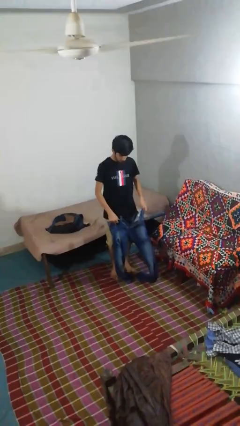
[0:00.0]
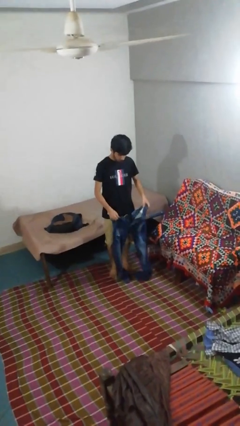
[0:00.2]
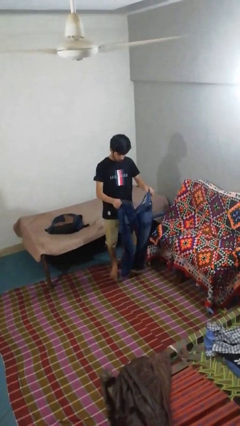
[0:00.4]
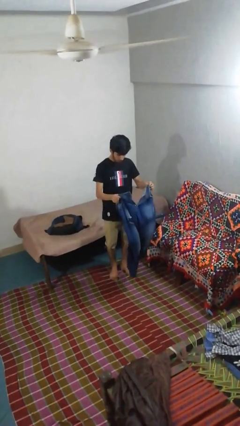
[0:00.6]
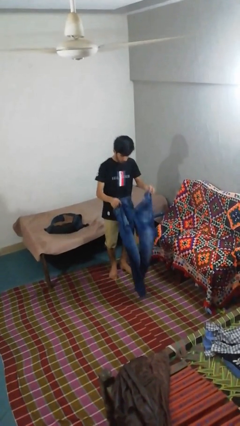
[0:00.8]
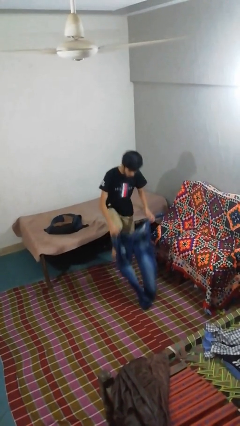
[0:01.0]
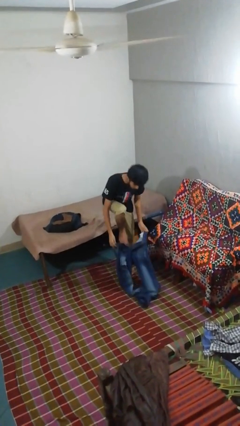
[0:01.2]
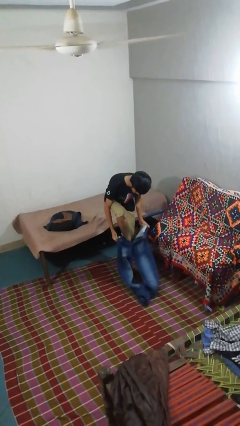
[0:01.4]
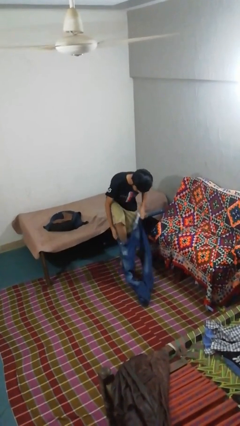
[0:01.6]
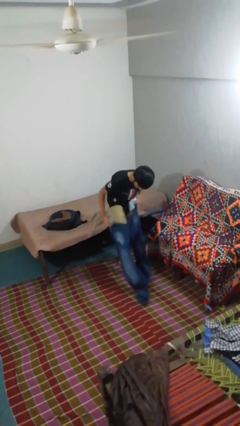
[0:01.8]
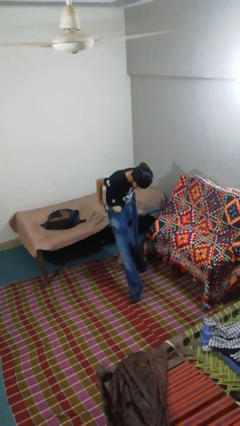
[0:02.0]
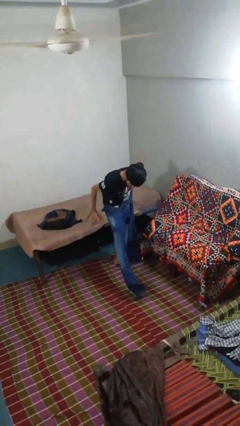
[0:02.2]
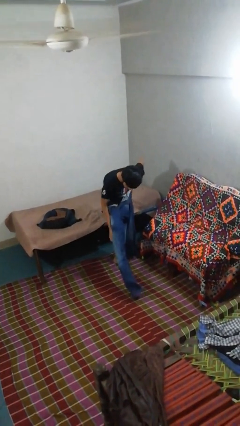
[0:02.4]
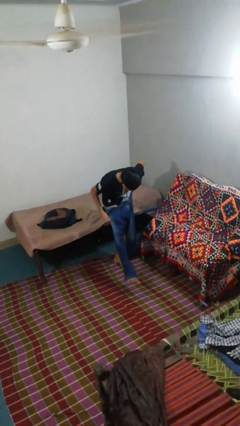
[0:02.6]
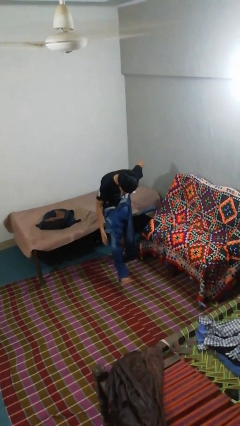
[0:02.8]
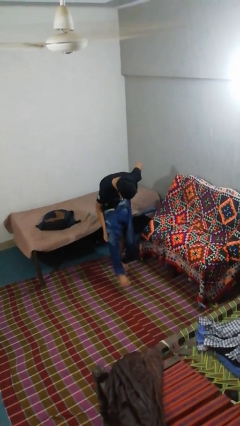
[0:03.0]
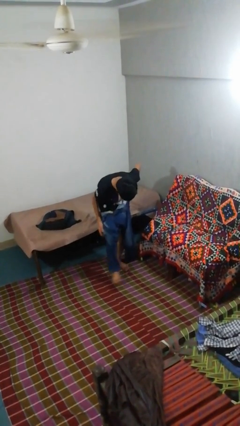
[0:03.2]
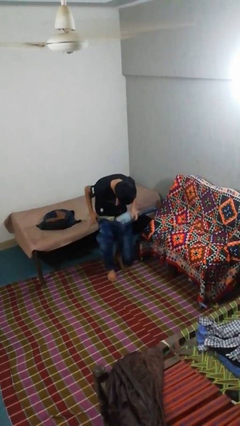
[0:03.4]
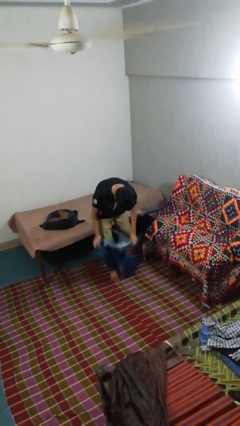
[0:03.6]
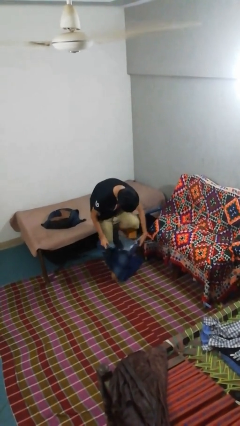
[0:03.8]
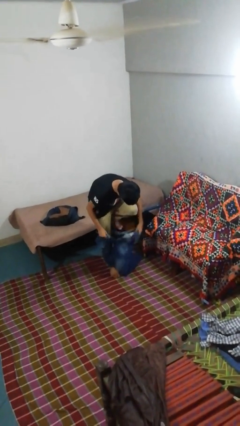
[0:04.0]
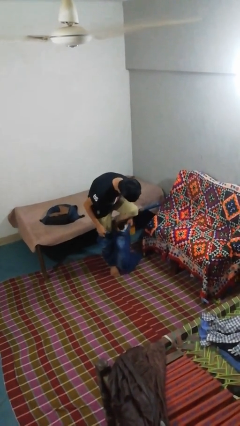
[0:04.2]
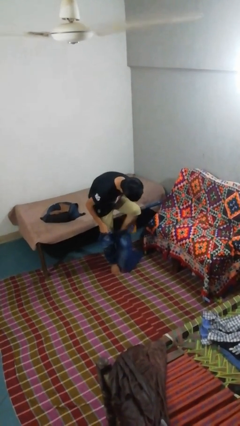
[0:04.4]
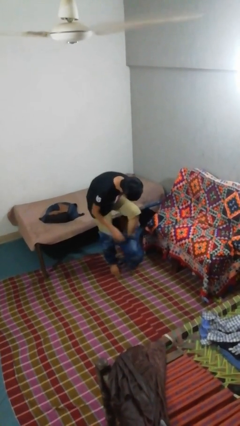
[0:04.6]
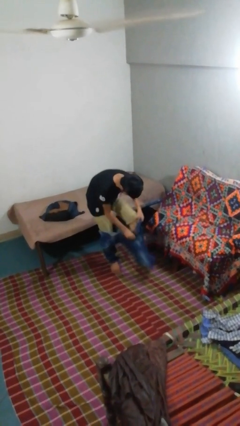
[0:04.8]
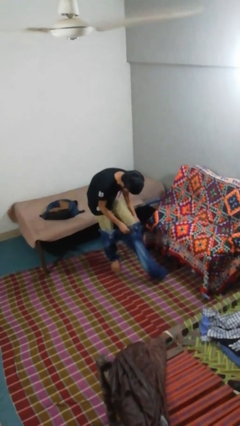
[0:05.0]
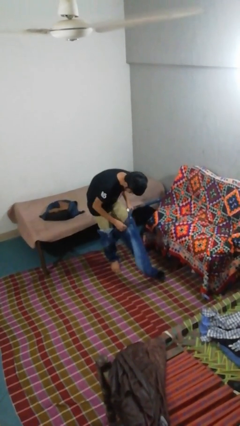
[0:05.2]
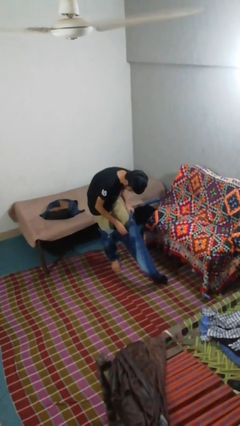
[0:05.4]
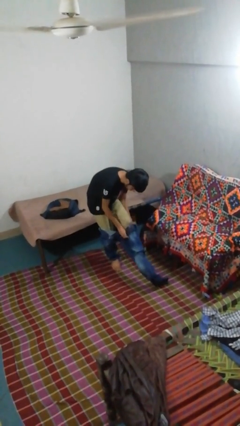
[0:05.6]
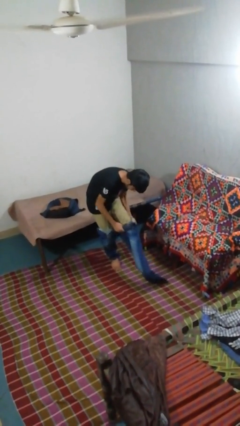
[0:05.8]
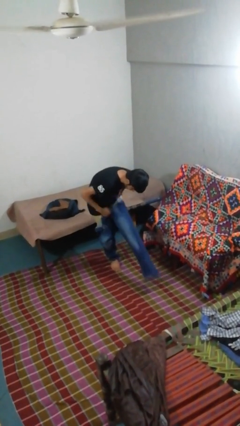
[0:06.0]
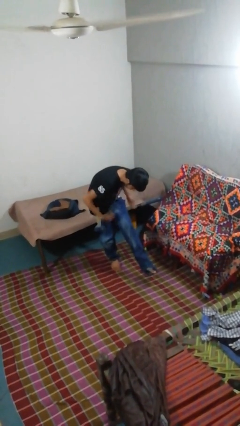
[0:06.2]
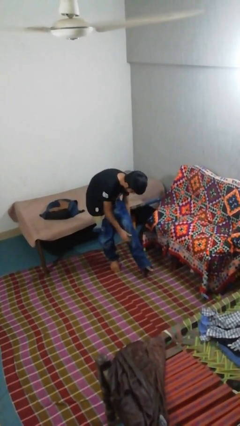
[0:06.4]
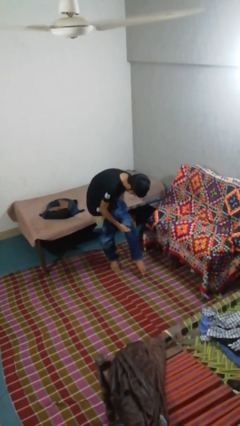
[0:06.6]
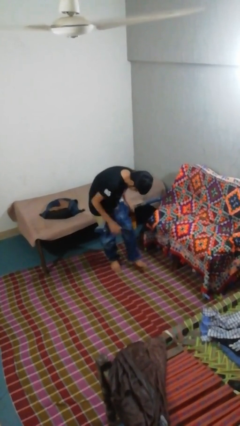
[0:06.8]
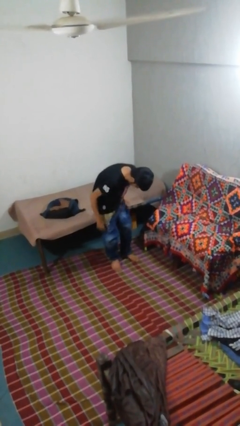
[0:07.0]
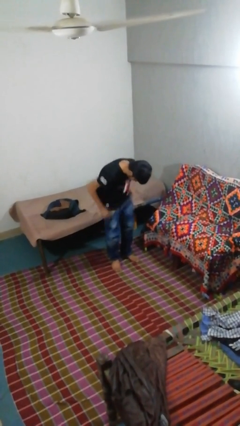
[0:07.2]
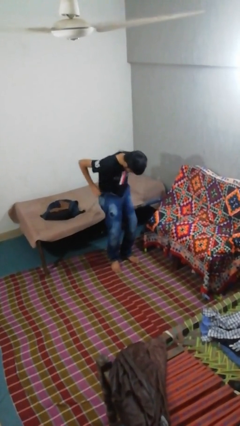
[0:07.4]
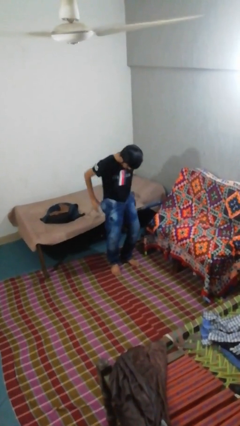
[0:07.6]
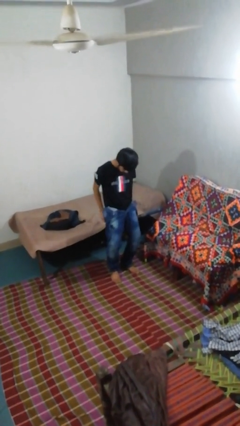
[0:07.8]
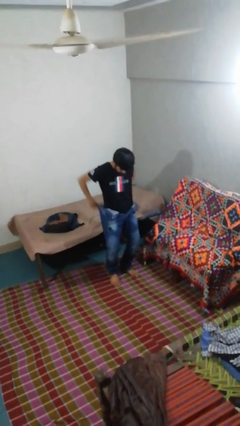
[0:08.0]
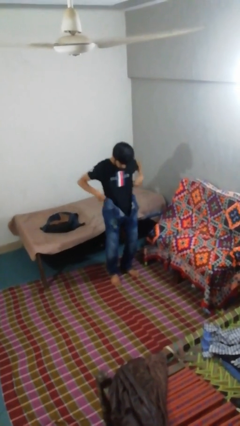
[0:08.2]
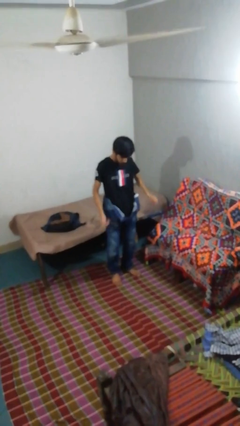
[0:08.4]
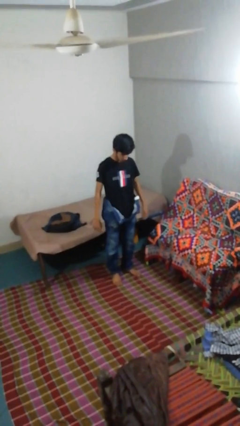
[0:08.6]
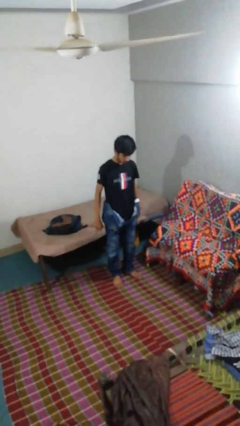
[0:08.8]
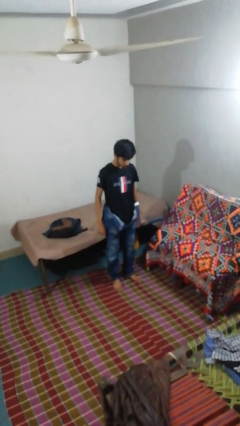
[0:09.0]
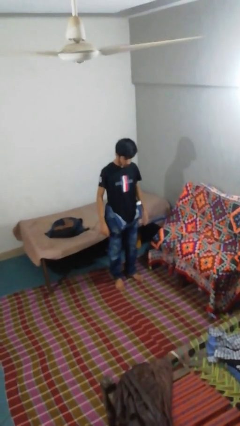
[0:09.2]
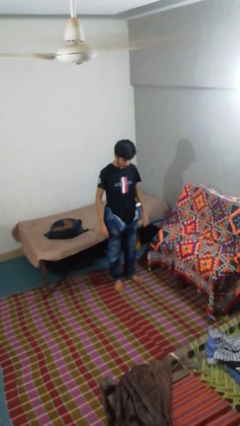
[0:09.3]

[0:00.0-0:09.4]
person puts on pants

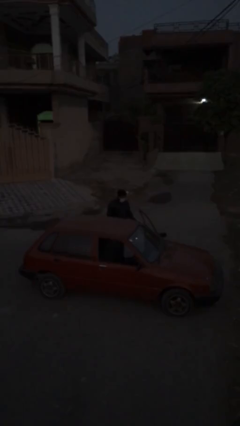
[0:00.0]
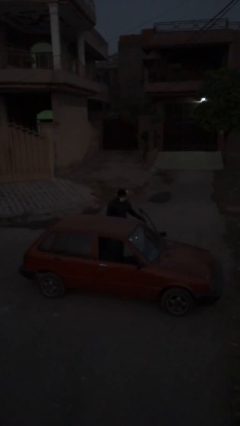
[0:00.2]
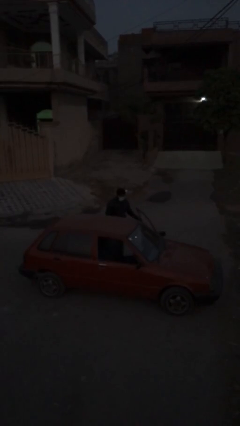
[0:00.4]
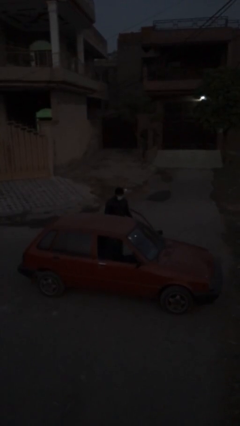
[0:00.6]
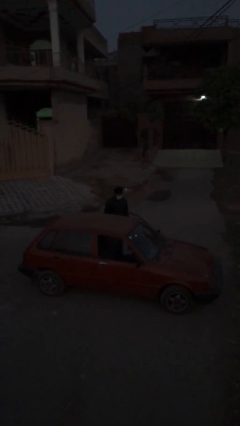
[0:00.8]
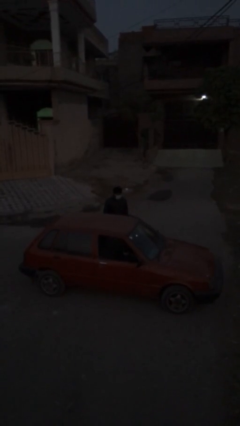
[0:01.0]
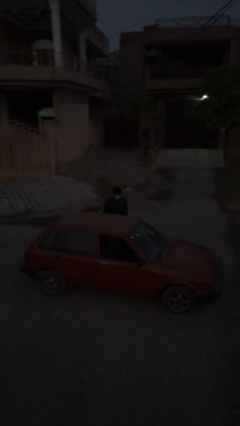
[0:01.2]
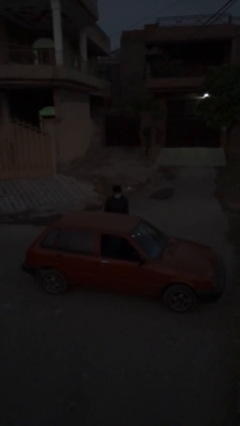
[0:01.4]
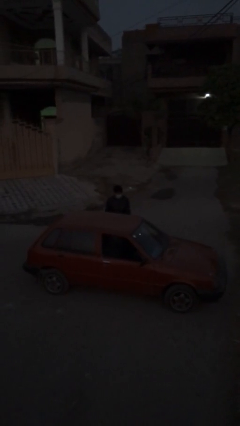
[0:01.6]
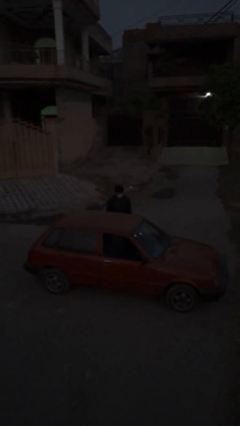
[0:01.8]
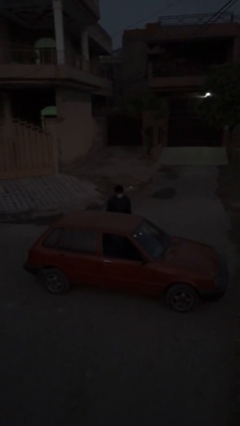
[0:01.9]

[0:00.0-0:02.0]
person closes car door

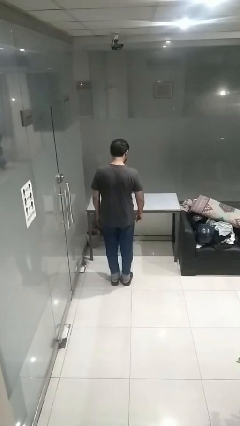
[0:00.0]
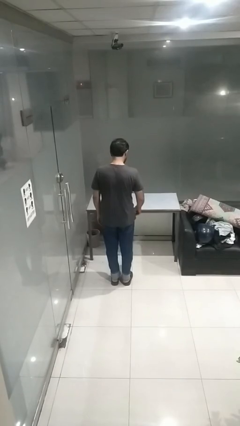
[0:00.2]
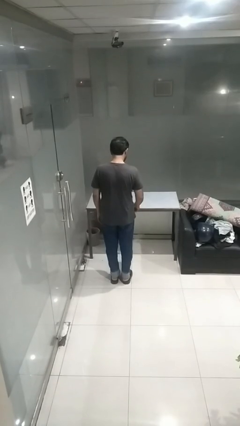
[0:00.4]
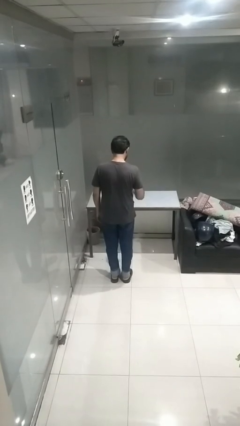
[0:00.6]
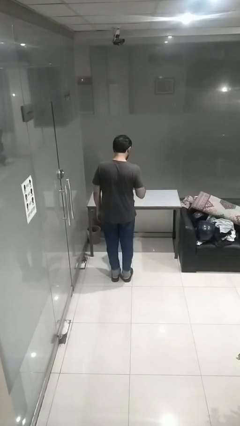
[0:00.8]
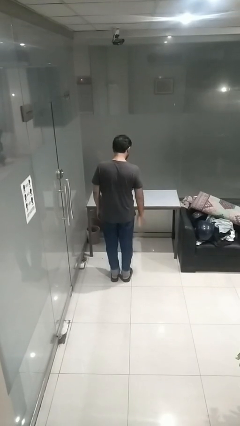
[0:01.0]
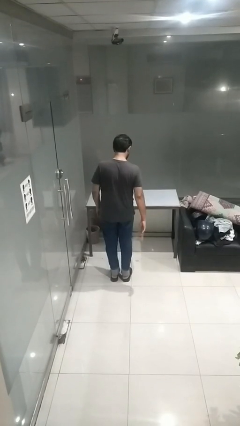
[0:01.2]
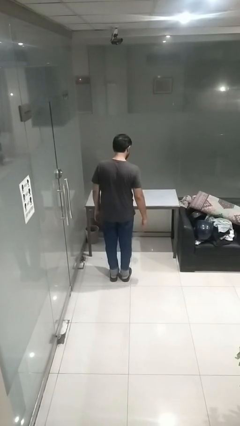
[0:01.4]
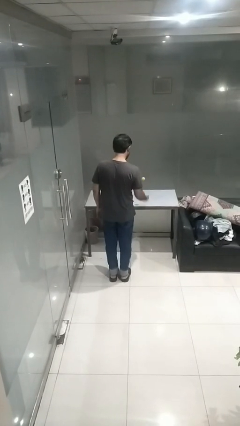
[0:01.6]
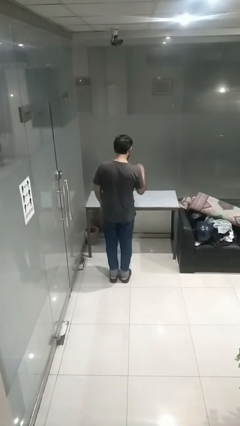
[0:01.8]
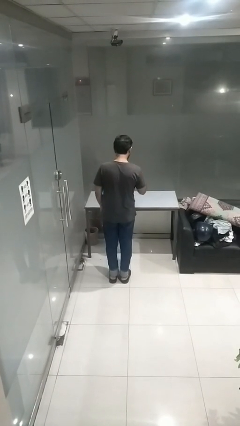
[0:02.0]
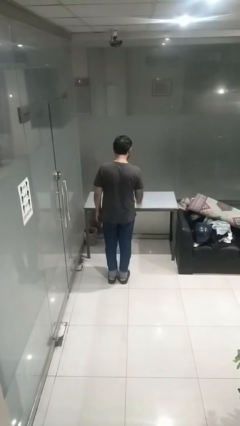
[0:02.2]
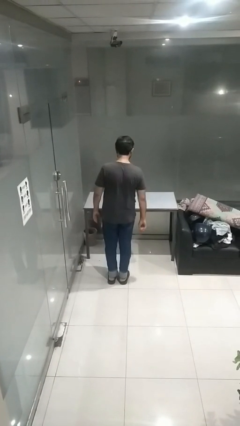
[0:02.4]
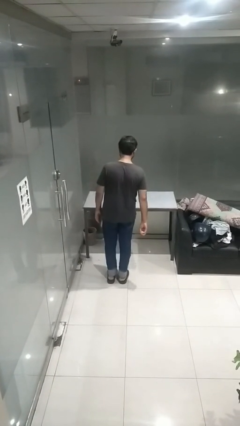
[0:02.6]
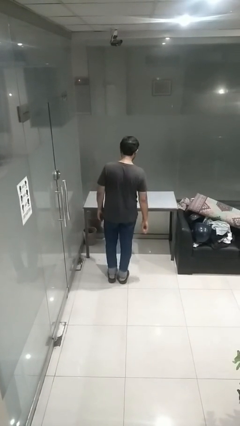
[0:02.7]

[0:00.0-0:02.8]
person bounces ball on floor

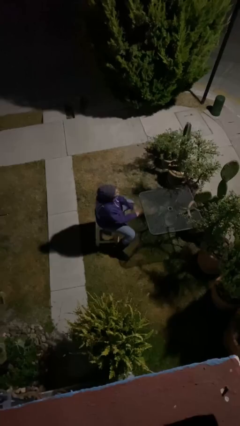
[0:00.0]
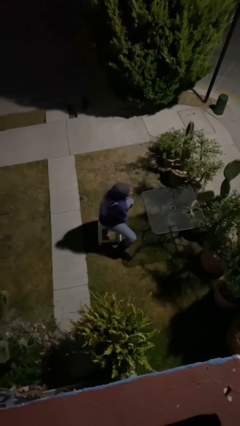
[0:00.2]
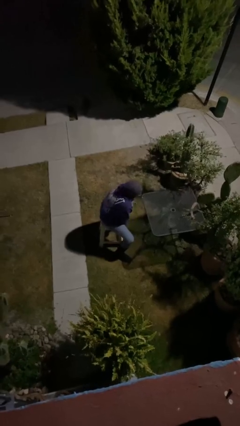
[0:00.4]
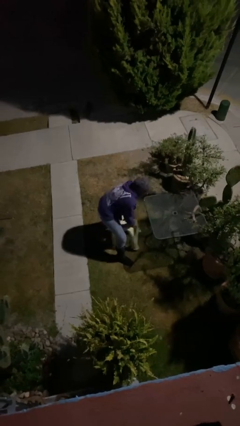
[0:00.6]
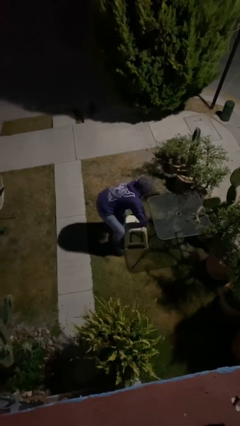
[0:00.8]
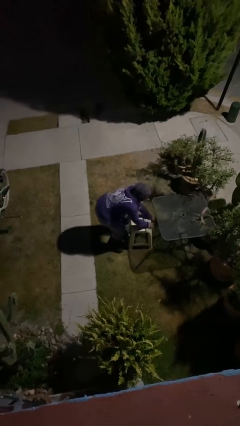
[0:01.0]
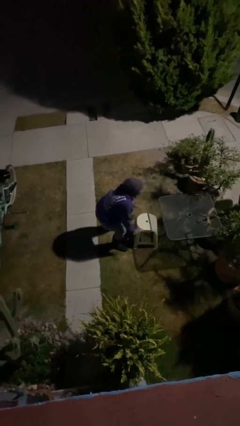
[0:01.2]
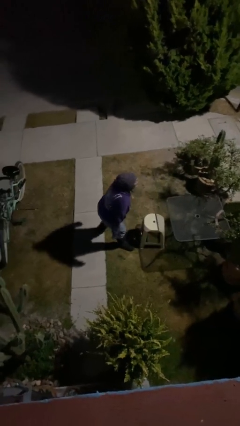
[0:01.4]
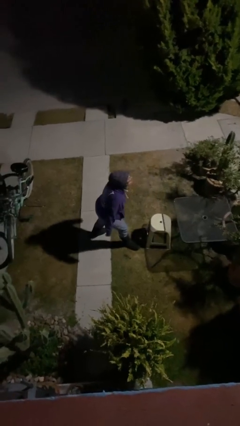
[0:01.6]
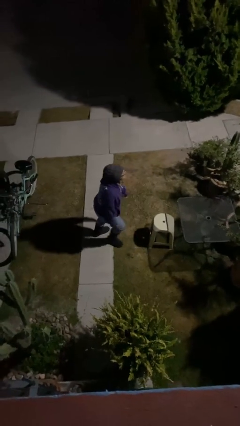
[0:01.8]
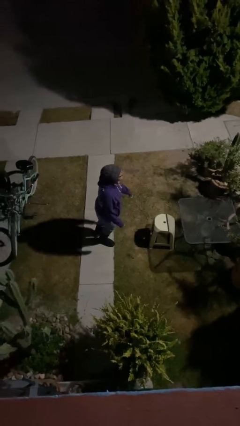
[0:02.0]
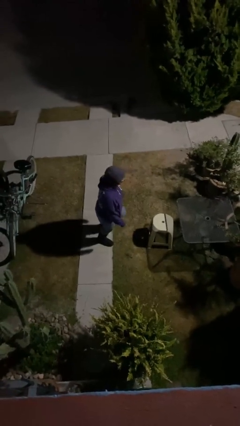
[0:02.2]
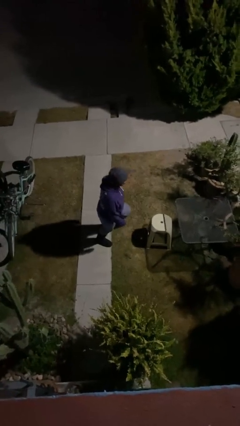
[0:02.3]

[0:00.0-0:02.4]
person stands up

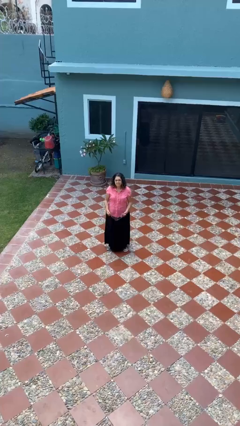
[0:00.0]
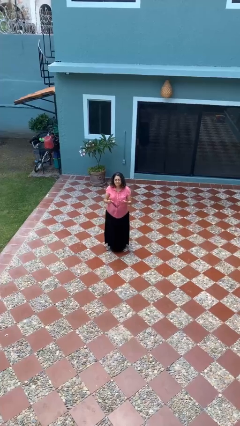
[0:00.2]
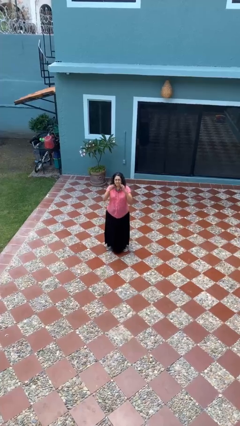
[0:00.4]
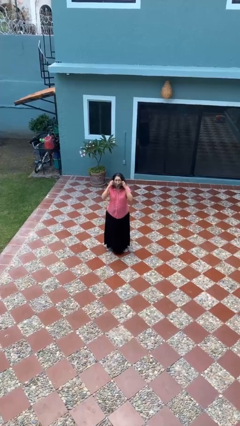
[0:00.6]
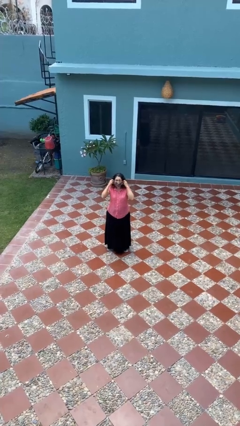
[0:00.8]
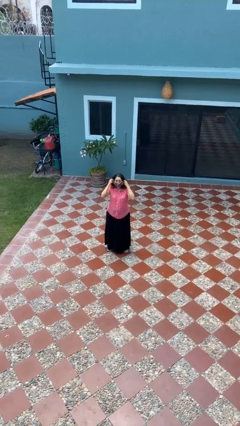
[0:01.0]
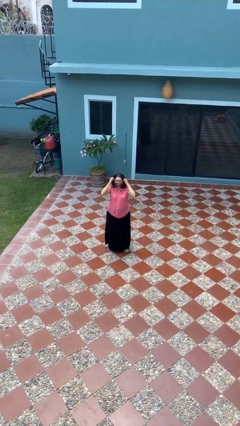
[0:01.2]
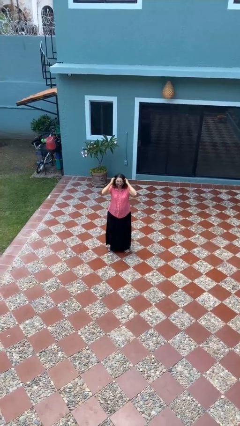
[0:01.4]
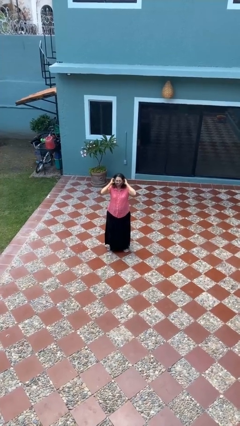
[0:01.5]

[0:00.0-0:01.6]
person puts on facemask
